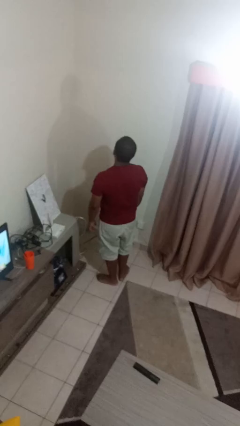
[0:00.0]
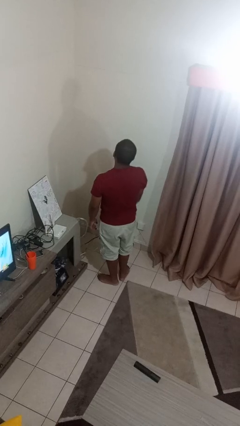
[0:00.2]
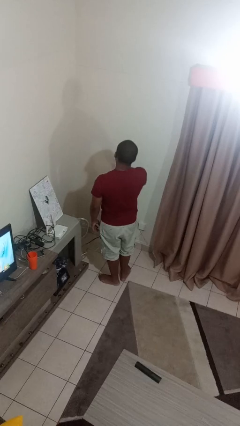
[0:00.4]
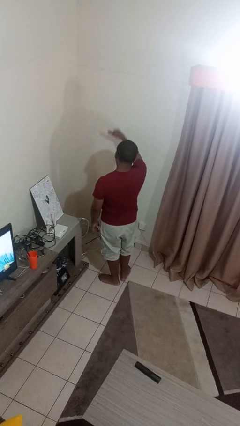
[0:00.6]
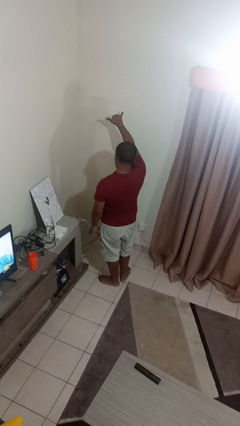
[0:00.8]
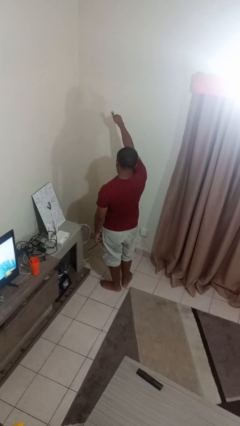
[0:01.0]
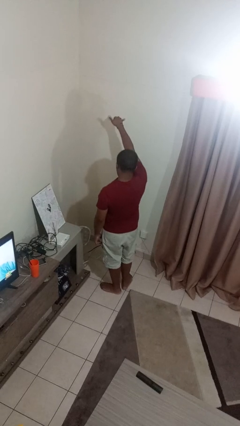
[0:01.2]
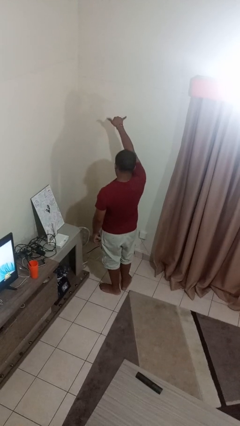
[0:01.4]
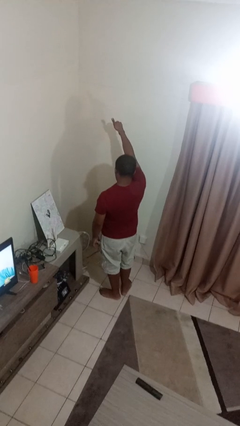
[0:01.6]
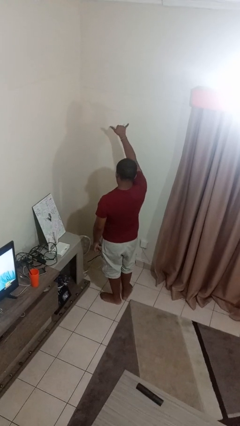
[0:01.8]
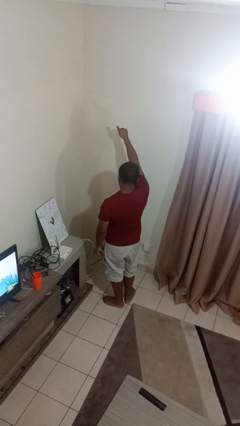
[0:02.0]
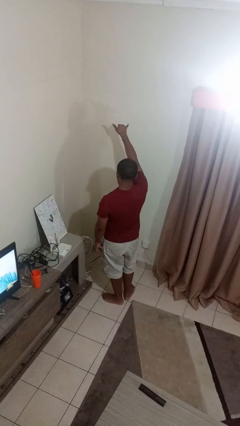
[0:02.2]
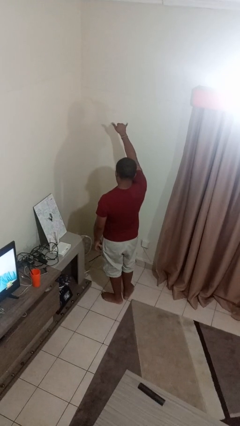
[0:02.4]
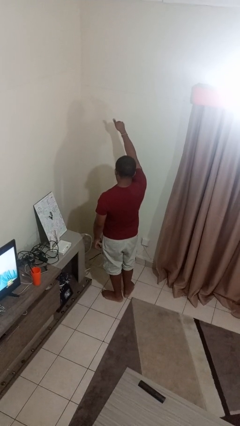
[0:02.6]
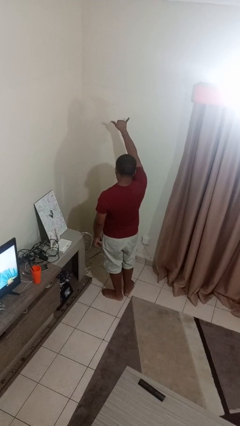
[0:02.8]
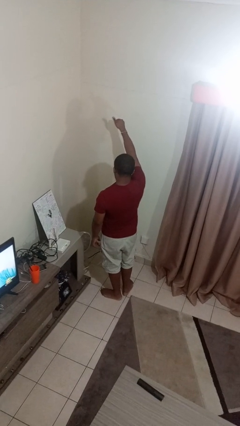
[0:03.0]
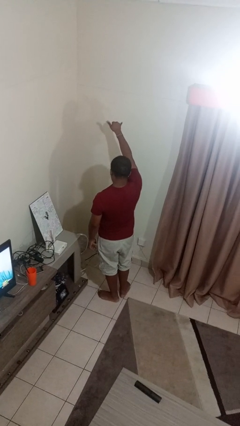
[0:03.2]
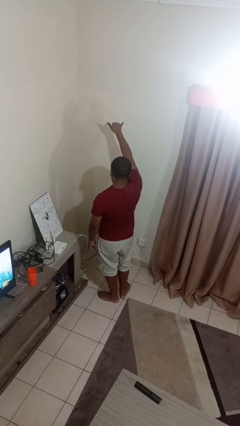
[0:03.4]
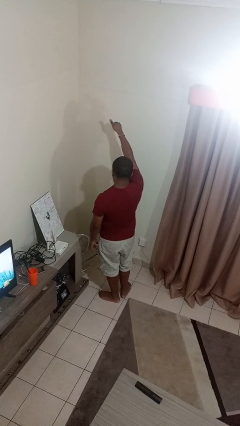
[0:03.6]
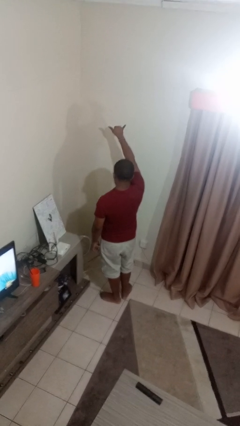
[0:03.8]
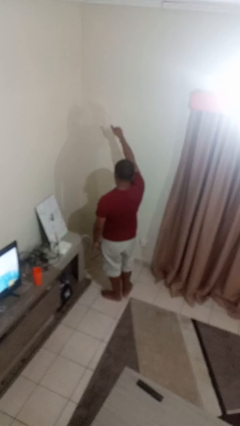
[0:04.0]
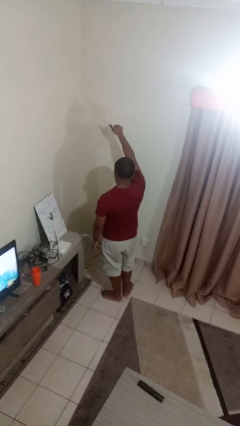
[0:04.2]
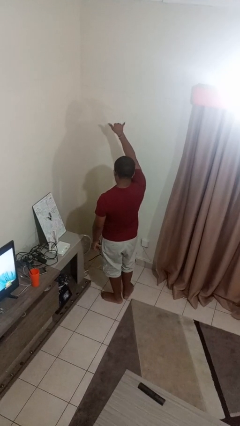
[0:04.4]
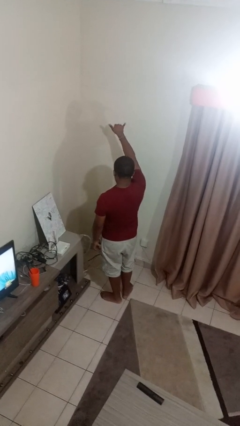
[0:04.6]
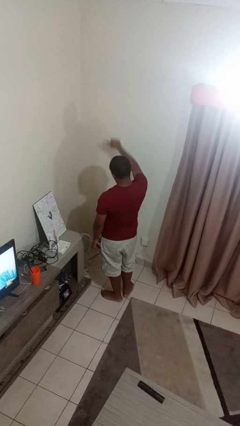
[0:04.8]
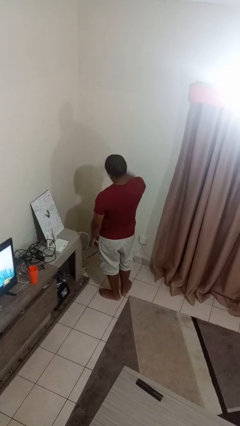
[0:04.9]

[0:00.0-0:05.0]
person gestures hang loose

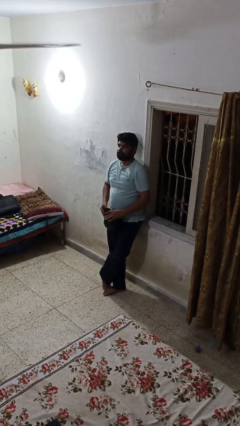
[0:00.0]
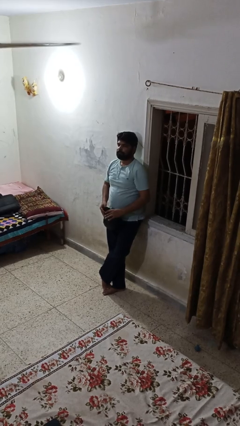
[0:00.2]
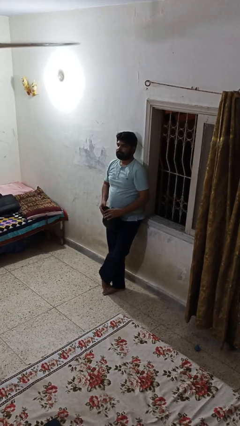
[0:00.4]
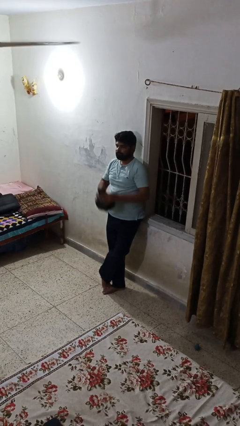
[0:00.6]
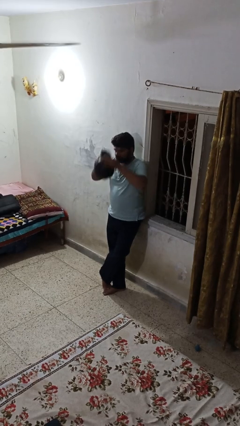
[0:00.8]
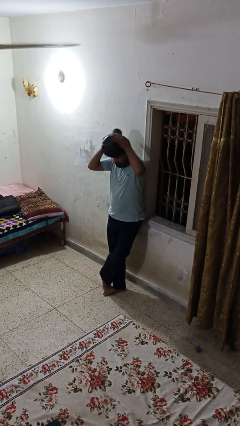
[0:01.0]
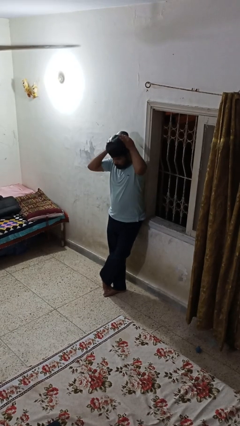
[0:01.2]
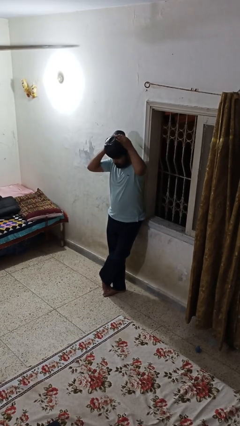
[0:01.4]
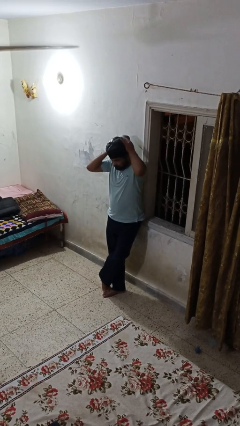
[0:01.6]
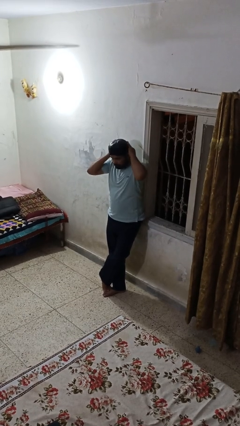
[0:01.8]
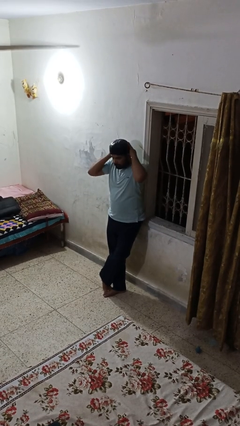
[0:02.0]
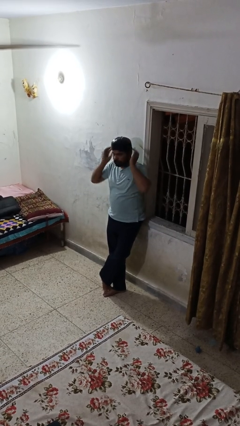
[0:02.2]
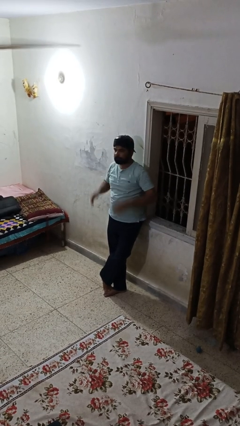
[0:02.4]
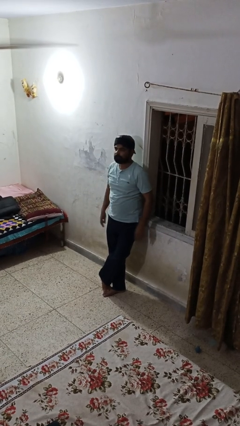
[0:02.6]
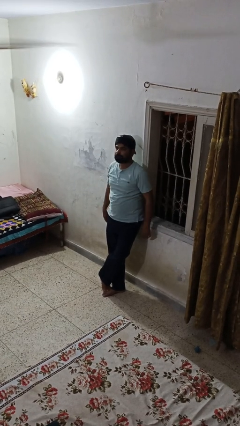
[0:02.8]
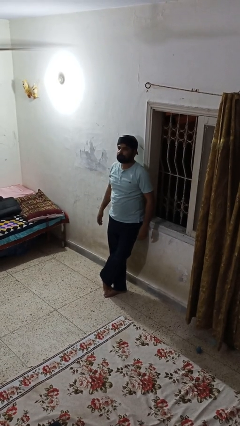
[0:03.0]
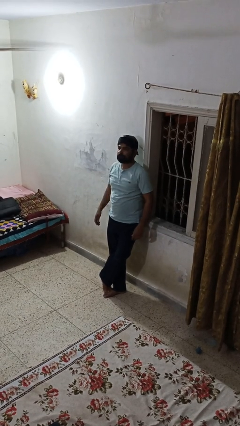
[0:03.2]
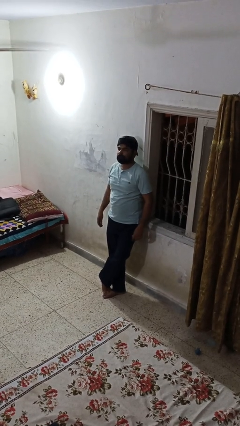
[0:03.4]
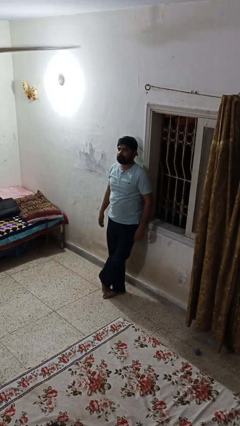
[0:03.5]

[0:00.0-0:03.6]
person puts on hat

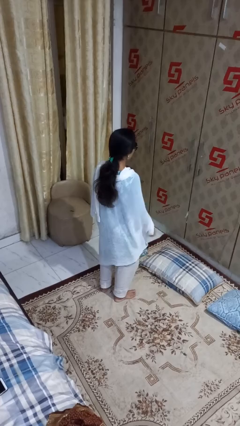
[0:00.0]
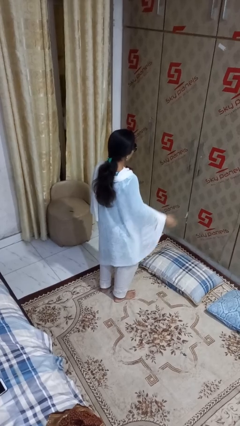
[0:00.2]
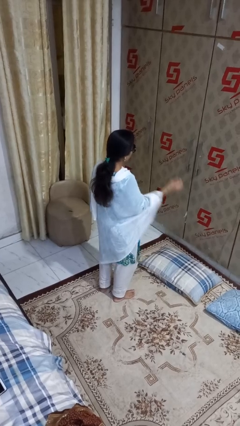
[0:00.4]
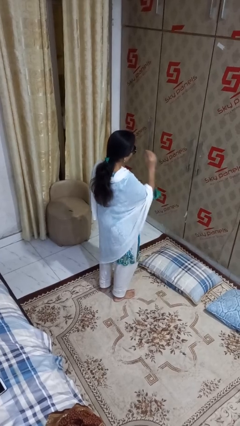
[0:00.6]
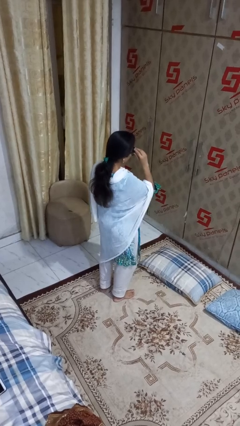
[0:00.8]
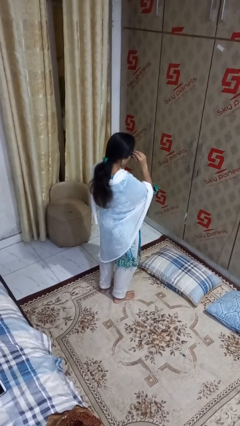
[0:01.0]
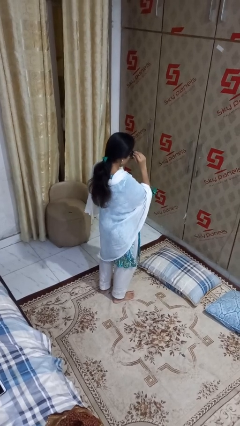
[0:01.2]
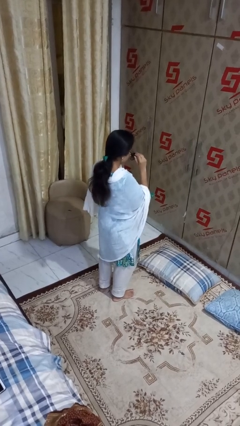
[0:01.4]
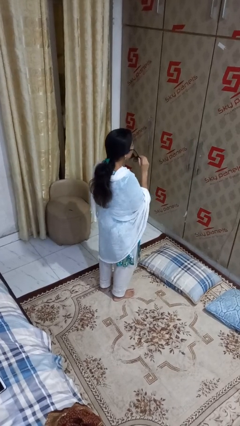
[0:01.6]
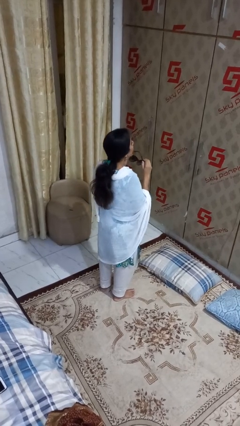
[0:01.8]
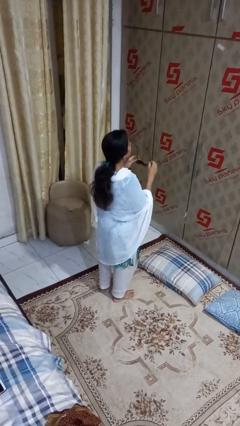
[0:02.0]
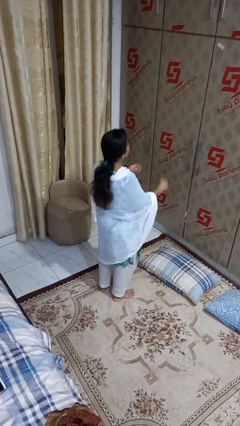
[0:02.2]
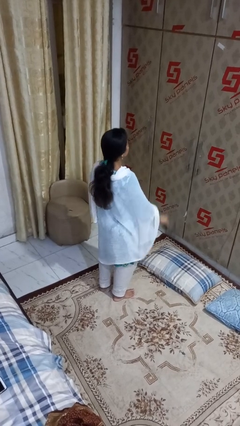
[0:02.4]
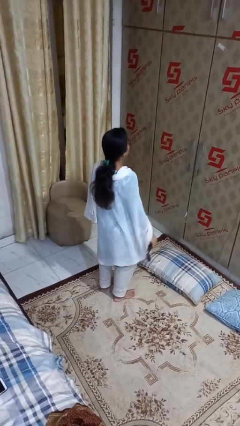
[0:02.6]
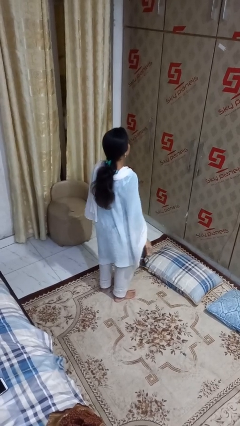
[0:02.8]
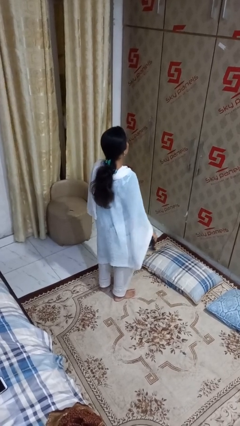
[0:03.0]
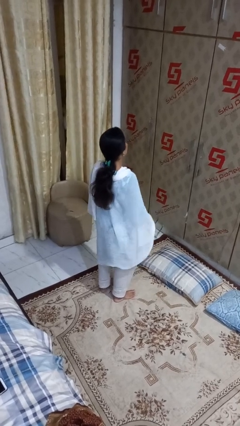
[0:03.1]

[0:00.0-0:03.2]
person takes off sunglasses

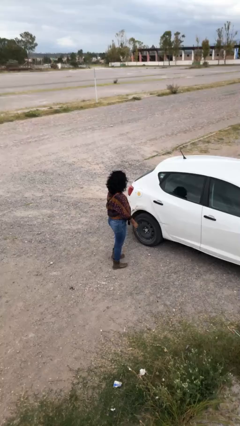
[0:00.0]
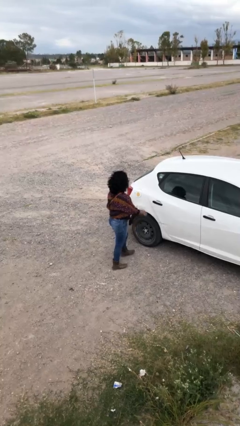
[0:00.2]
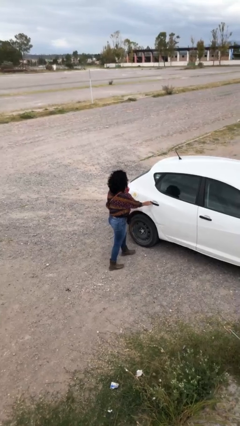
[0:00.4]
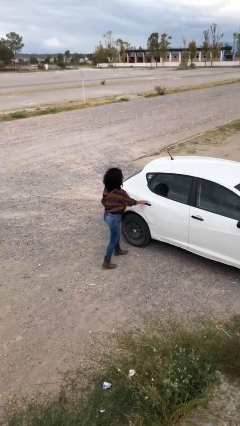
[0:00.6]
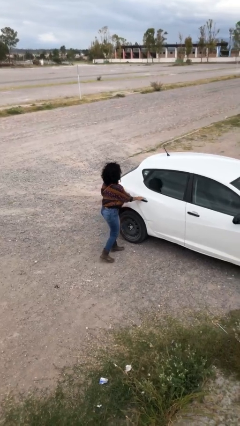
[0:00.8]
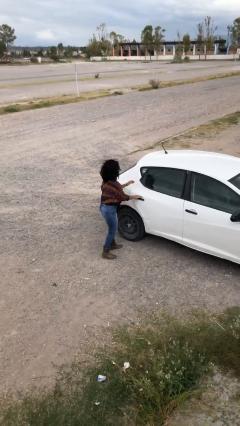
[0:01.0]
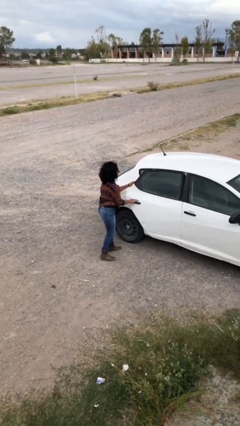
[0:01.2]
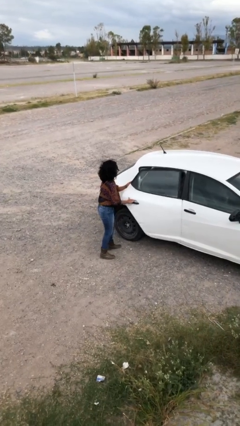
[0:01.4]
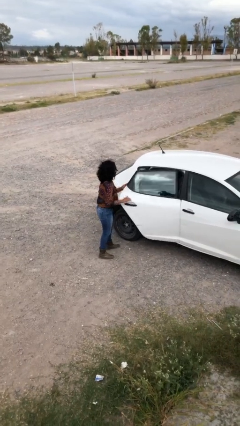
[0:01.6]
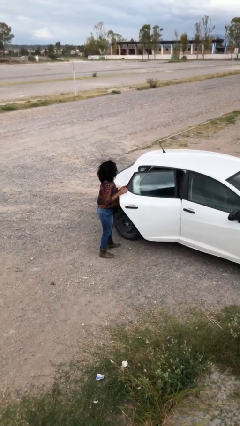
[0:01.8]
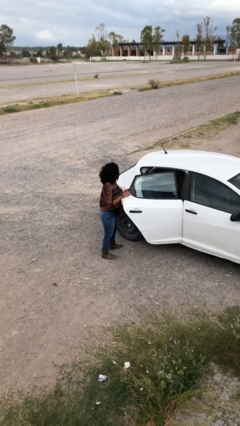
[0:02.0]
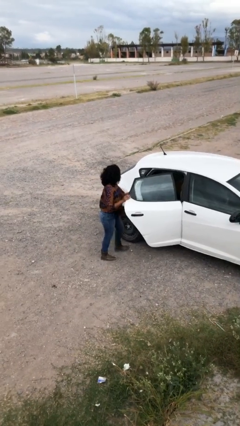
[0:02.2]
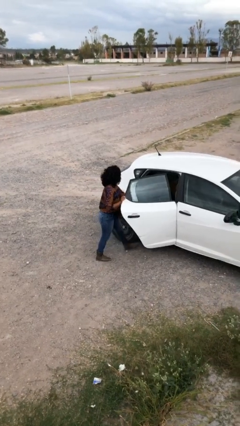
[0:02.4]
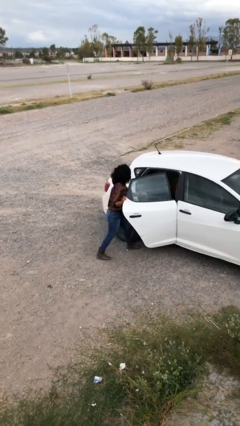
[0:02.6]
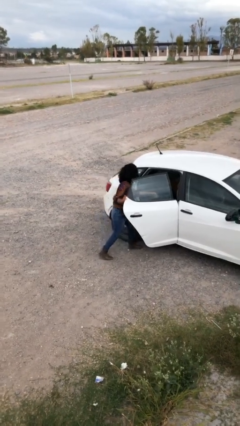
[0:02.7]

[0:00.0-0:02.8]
person opens car door

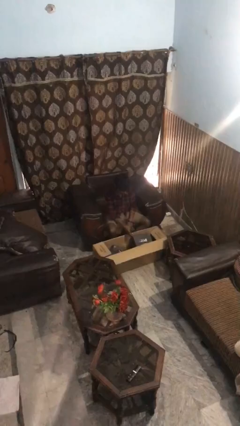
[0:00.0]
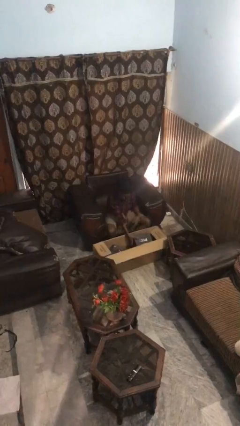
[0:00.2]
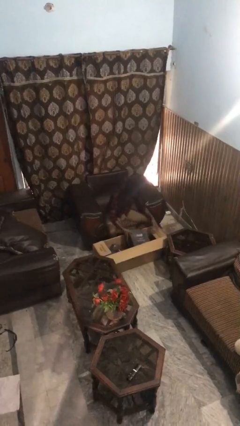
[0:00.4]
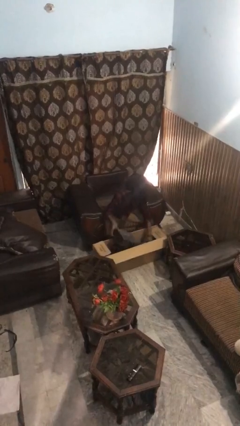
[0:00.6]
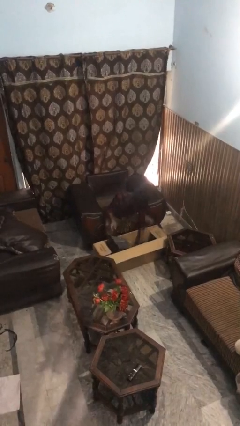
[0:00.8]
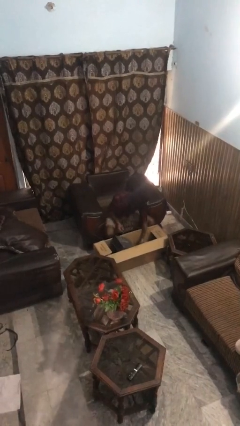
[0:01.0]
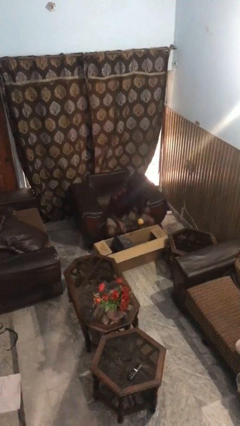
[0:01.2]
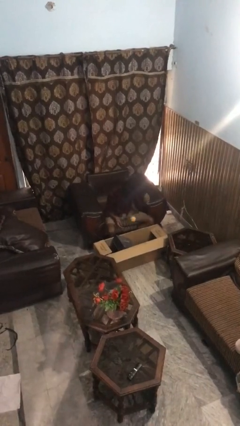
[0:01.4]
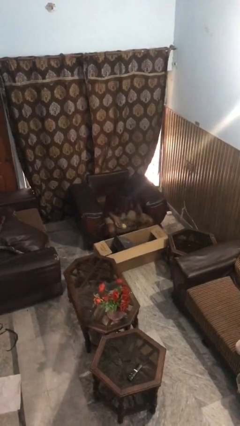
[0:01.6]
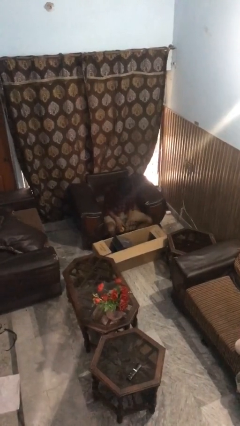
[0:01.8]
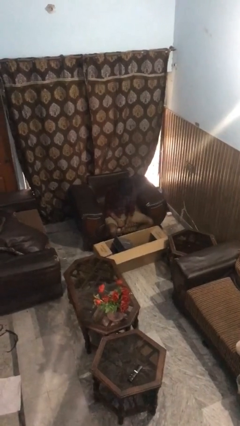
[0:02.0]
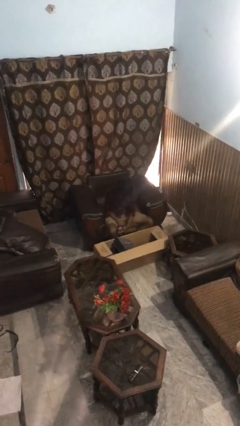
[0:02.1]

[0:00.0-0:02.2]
person searches in box

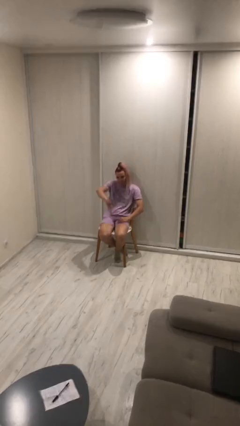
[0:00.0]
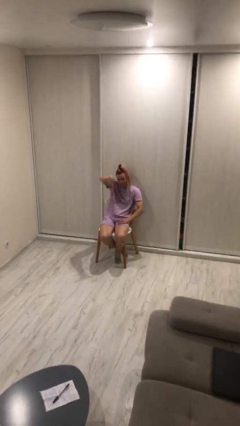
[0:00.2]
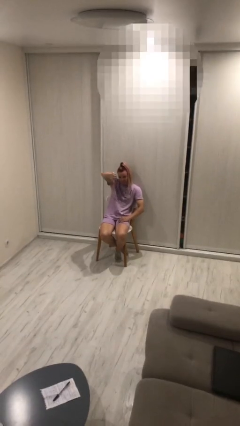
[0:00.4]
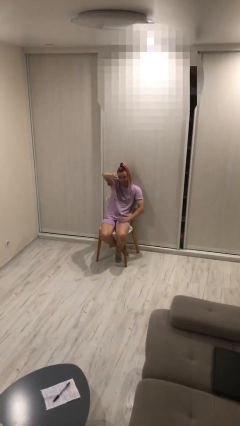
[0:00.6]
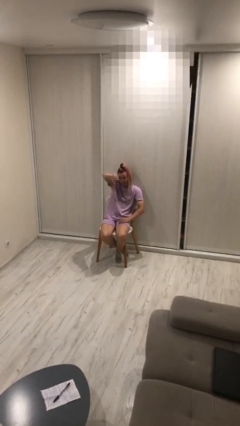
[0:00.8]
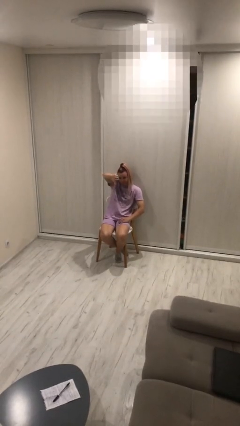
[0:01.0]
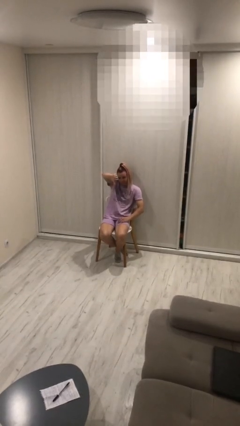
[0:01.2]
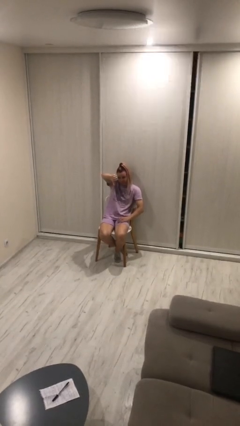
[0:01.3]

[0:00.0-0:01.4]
person gestures thumbs down
